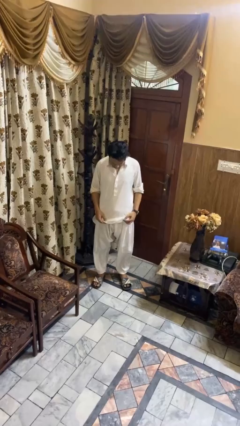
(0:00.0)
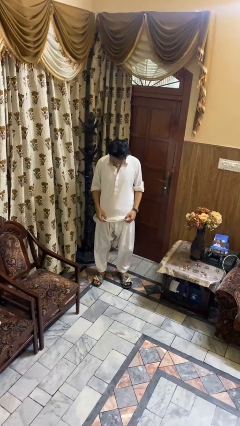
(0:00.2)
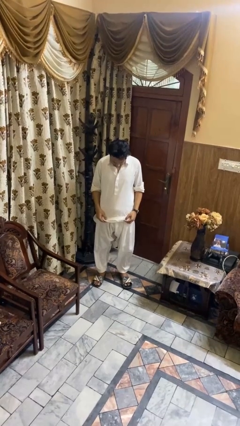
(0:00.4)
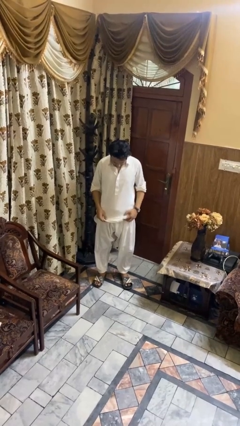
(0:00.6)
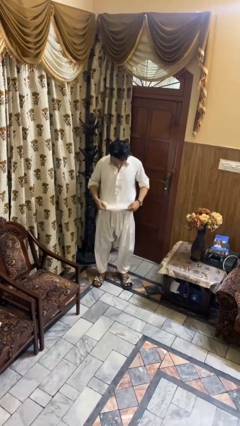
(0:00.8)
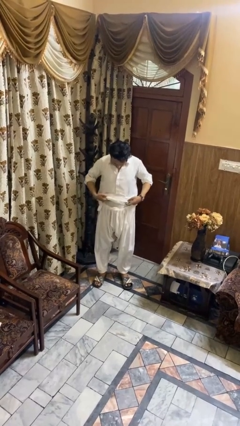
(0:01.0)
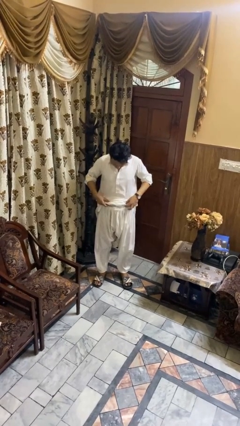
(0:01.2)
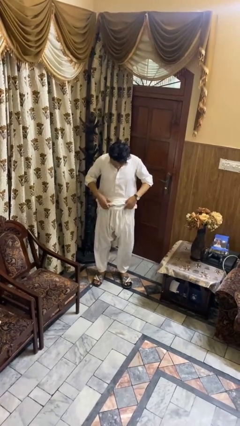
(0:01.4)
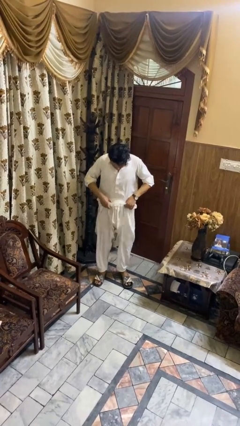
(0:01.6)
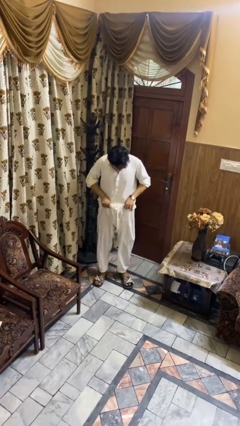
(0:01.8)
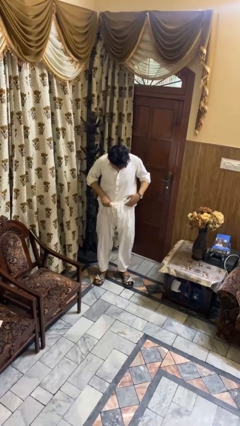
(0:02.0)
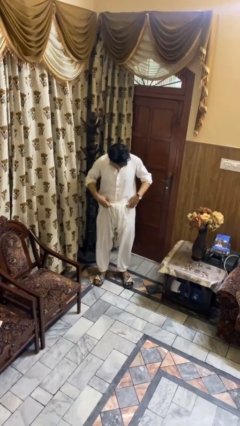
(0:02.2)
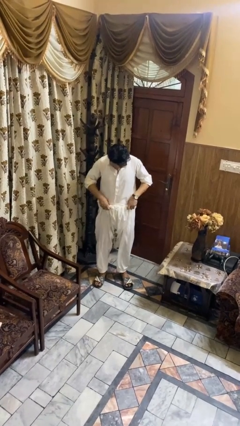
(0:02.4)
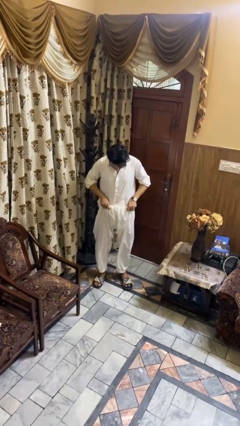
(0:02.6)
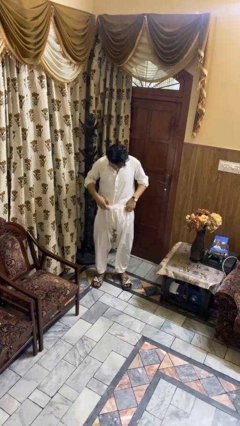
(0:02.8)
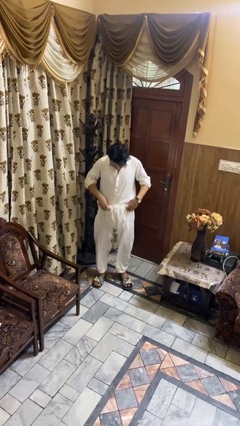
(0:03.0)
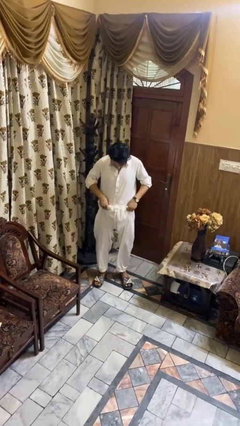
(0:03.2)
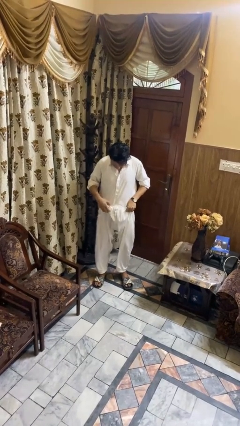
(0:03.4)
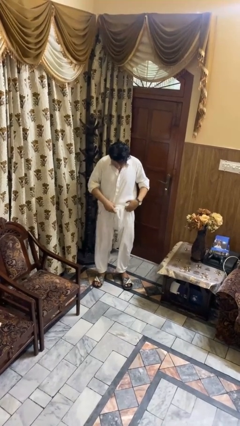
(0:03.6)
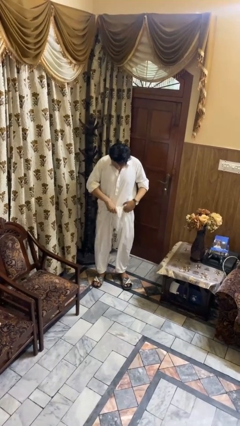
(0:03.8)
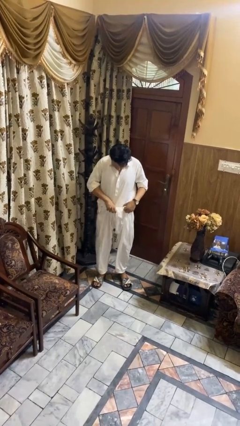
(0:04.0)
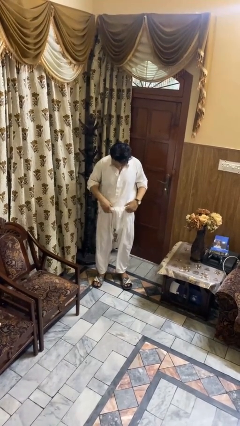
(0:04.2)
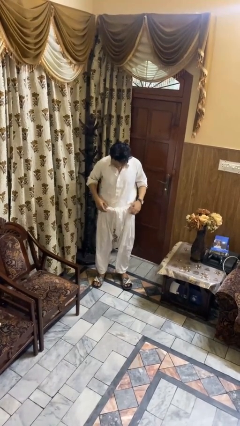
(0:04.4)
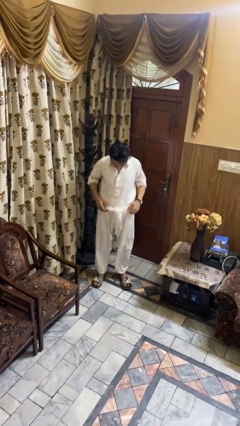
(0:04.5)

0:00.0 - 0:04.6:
person tucks in shirt

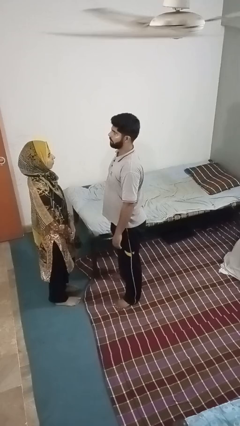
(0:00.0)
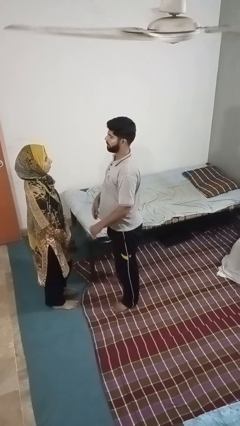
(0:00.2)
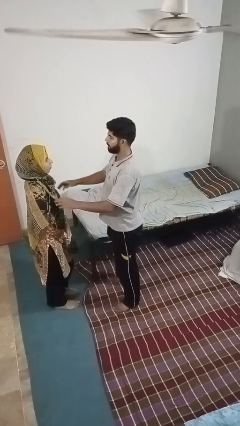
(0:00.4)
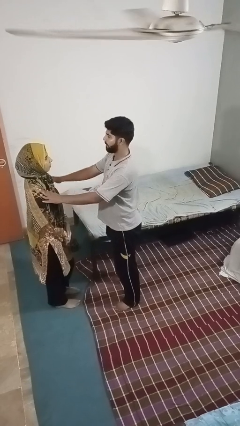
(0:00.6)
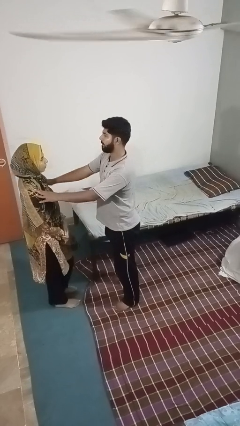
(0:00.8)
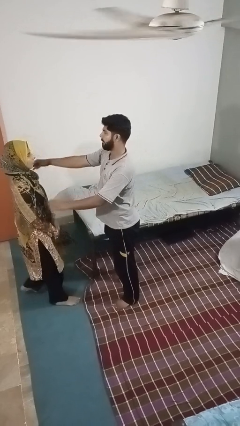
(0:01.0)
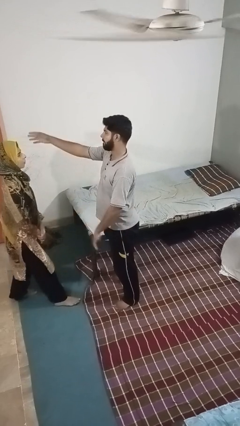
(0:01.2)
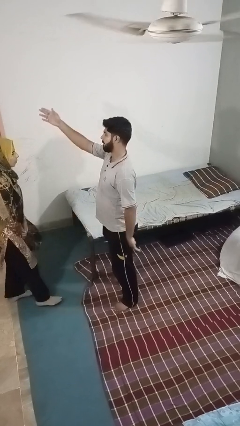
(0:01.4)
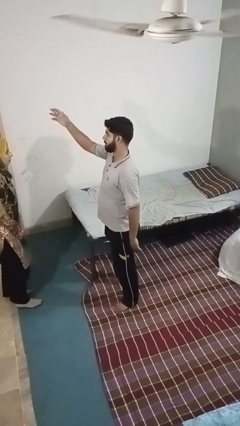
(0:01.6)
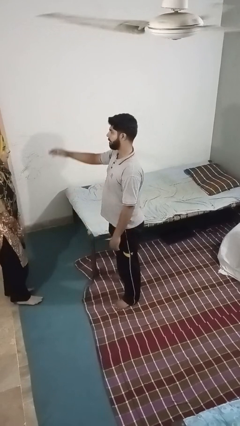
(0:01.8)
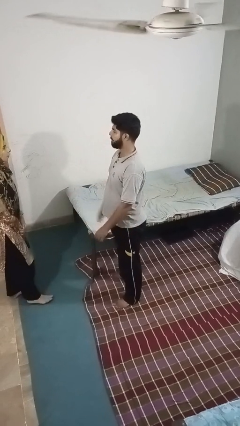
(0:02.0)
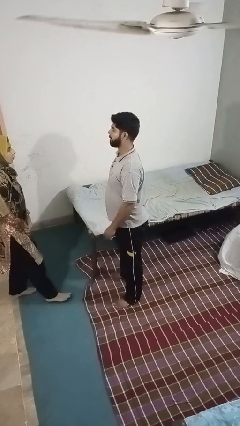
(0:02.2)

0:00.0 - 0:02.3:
person shoves person

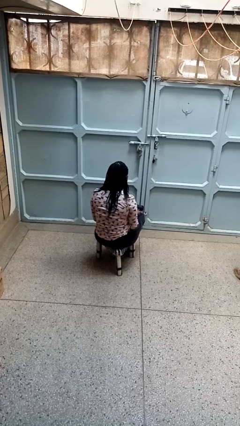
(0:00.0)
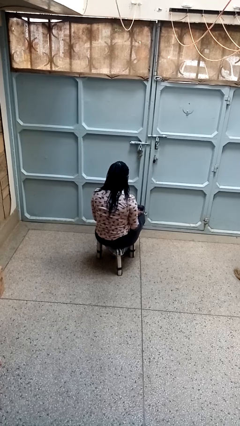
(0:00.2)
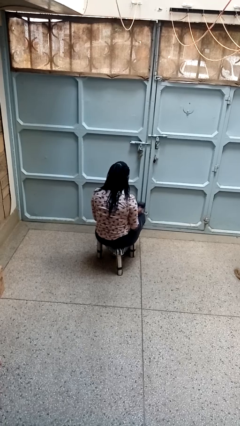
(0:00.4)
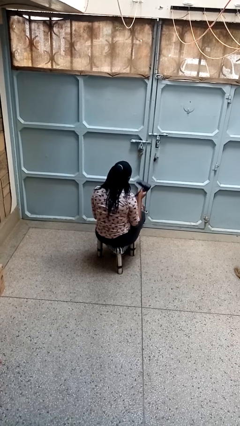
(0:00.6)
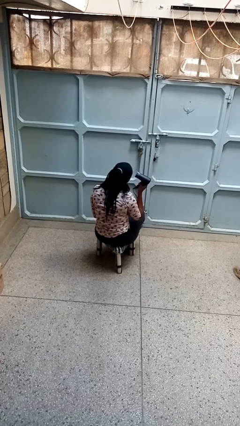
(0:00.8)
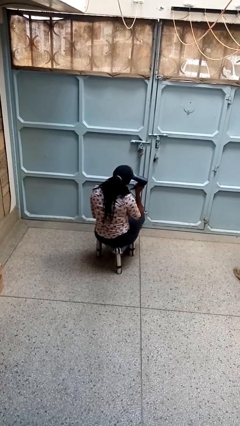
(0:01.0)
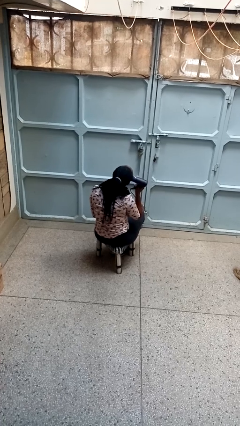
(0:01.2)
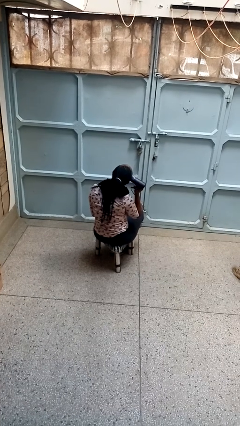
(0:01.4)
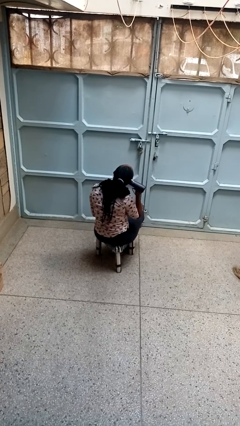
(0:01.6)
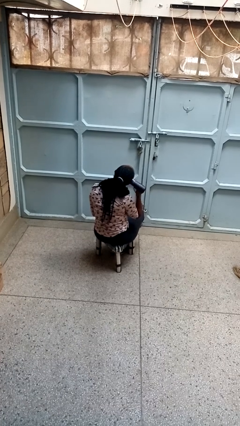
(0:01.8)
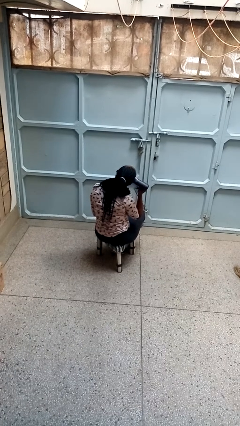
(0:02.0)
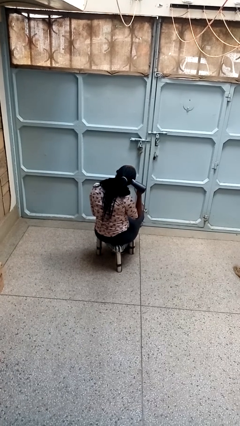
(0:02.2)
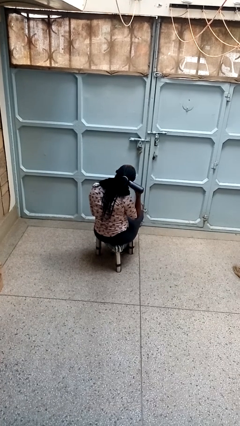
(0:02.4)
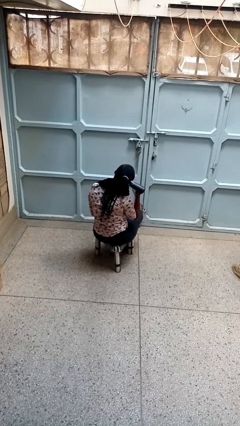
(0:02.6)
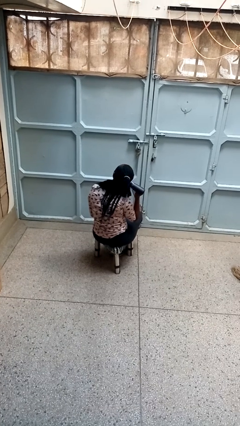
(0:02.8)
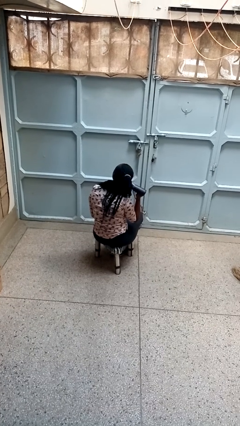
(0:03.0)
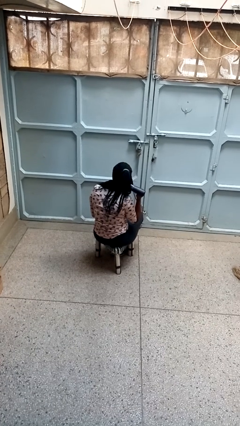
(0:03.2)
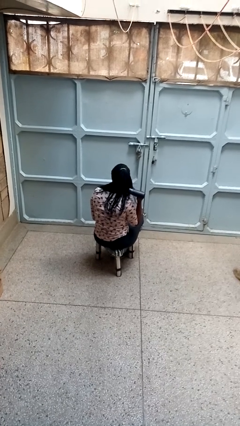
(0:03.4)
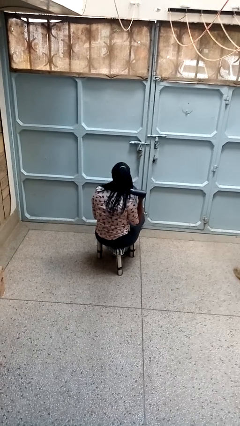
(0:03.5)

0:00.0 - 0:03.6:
person dries hair with hairdryer

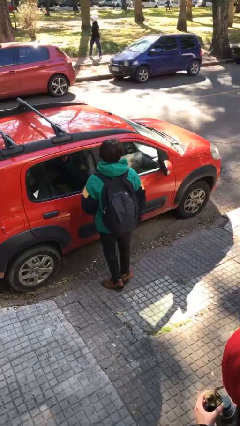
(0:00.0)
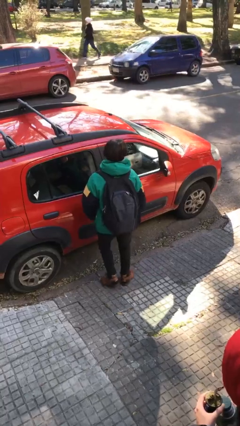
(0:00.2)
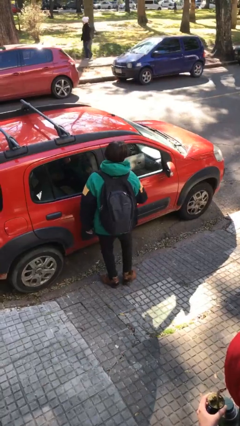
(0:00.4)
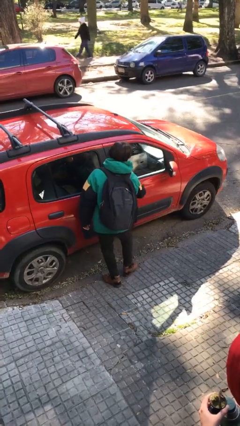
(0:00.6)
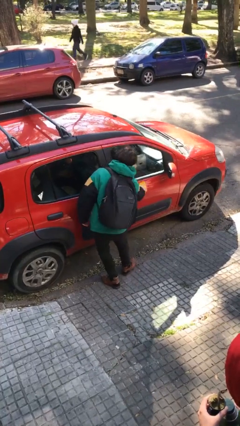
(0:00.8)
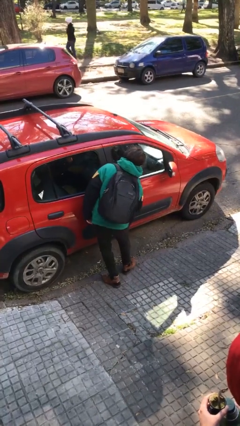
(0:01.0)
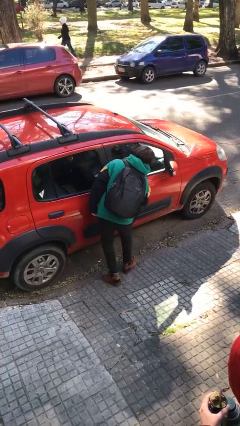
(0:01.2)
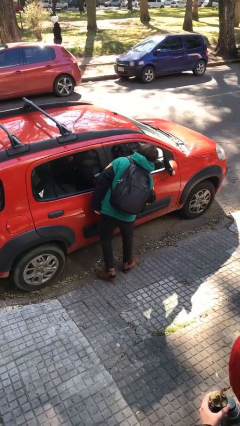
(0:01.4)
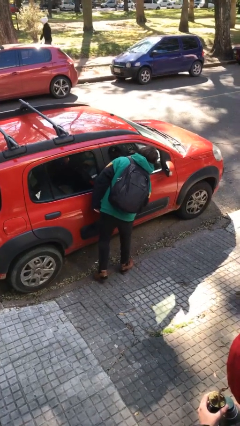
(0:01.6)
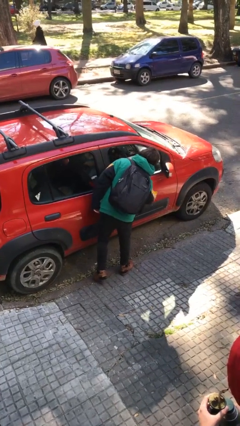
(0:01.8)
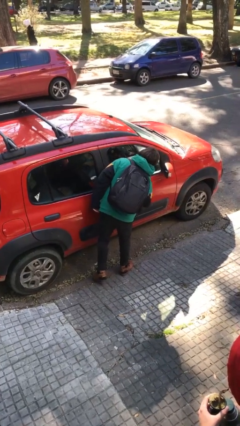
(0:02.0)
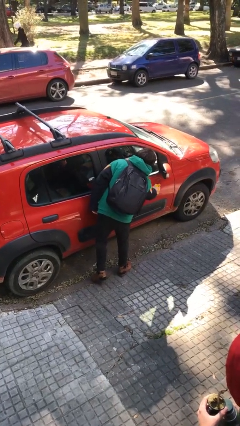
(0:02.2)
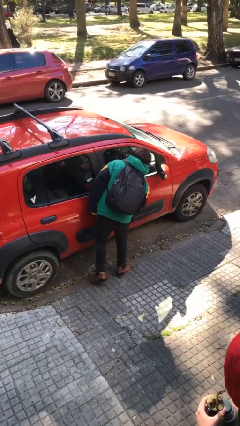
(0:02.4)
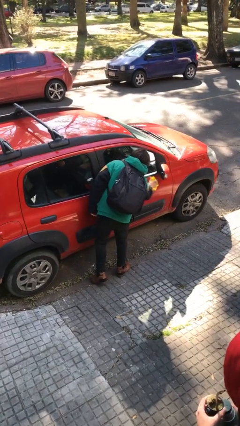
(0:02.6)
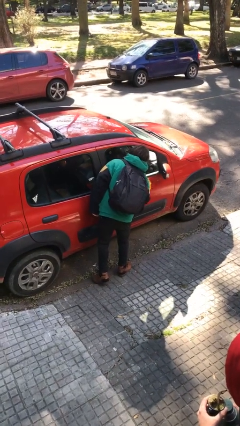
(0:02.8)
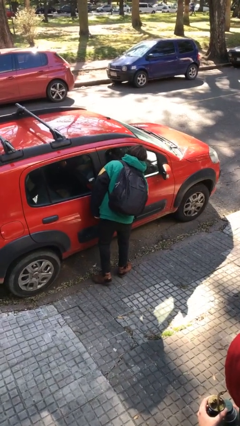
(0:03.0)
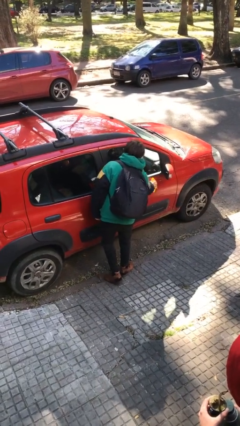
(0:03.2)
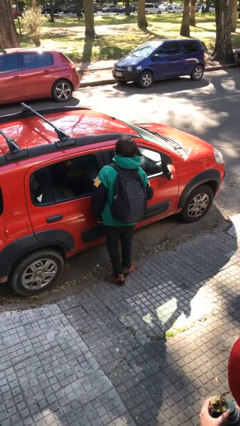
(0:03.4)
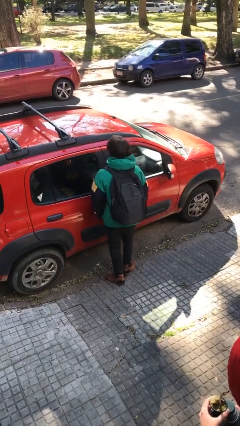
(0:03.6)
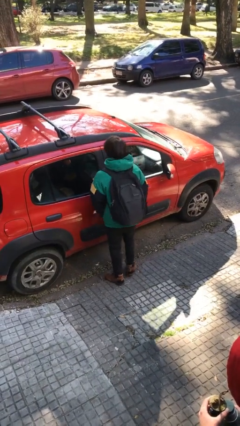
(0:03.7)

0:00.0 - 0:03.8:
person polishes car with rag

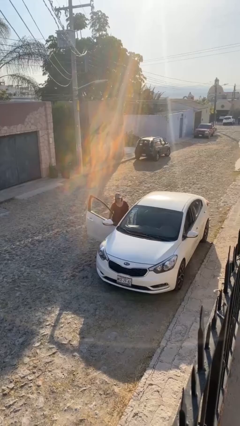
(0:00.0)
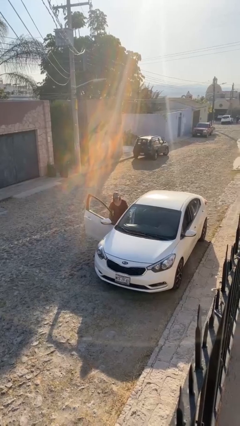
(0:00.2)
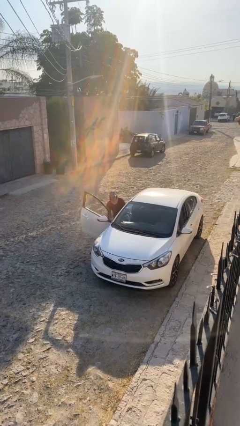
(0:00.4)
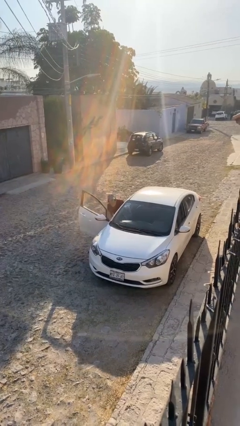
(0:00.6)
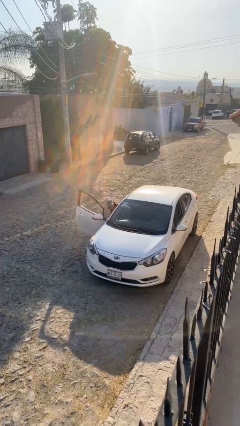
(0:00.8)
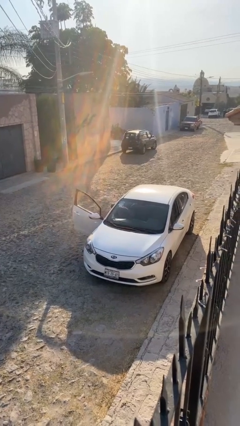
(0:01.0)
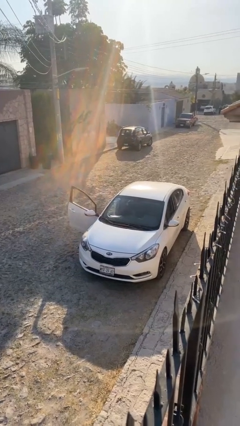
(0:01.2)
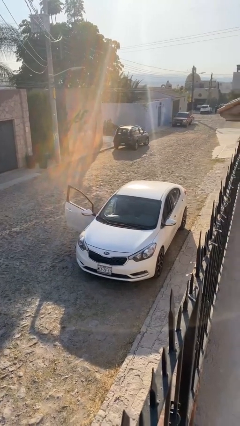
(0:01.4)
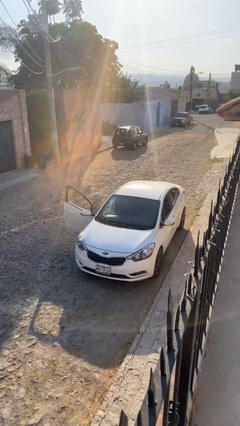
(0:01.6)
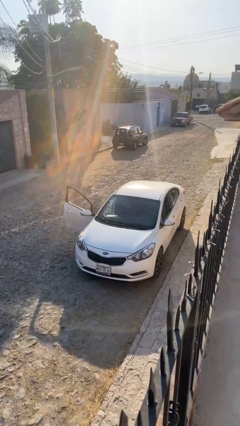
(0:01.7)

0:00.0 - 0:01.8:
person enters car

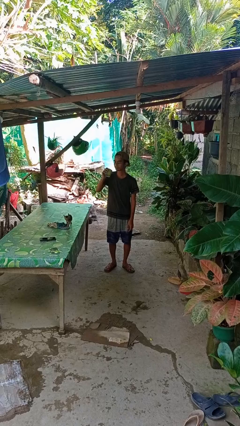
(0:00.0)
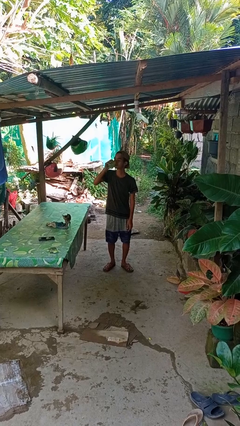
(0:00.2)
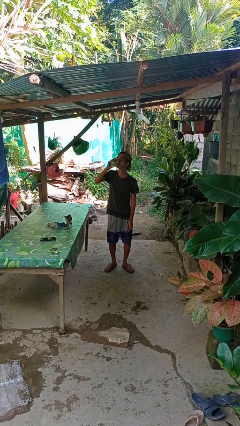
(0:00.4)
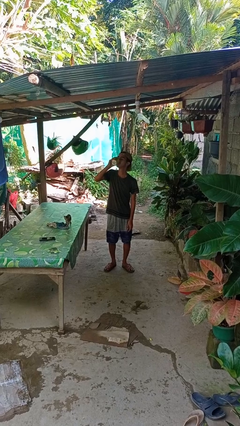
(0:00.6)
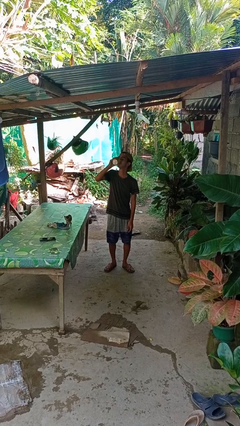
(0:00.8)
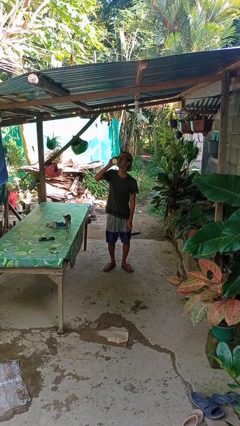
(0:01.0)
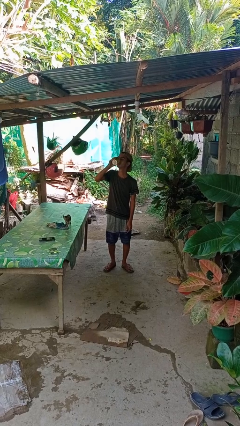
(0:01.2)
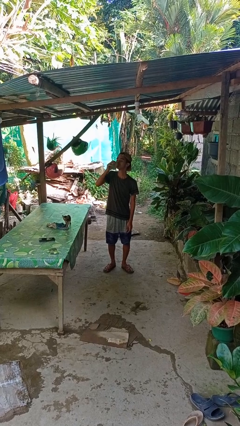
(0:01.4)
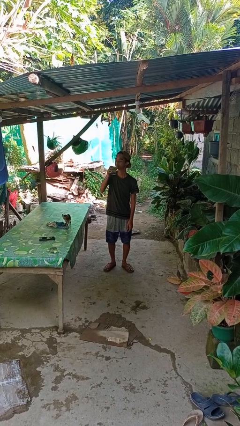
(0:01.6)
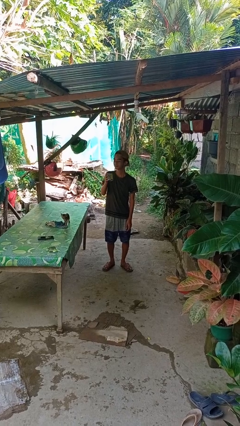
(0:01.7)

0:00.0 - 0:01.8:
person drinks from beverage can
